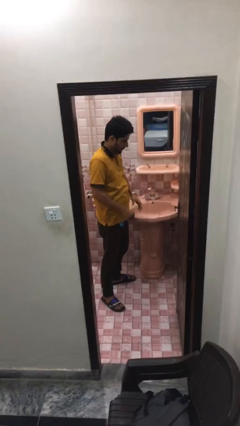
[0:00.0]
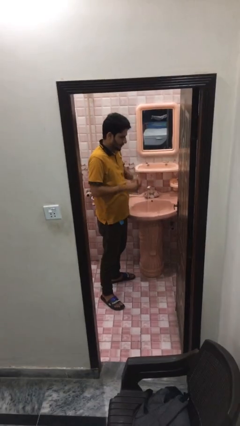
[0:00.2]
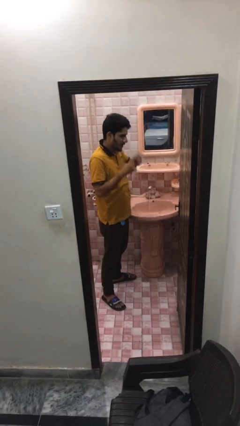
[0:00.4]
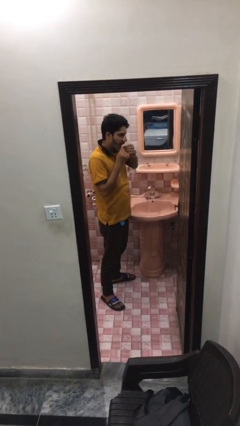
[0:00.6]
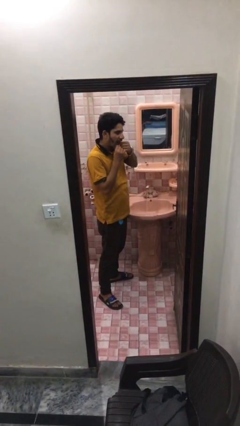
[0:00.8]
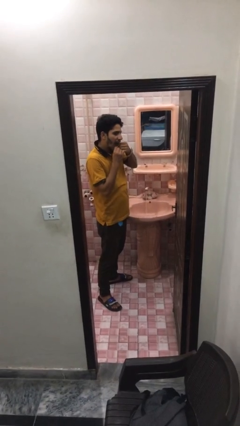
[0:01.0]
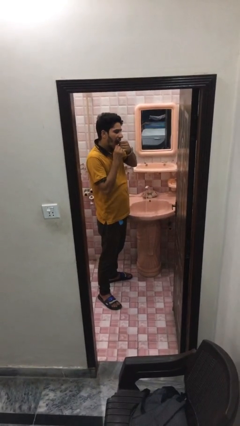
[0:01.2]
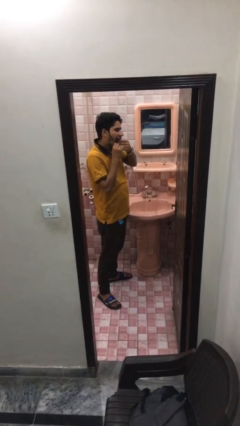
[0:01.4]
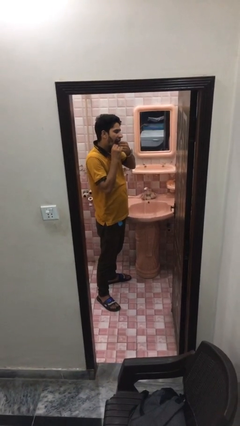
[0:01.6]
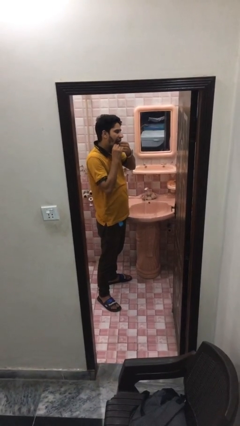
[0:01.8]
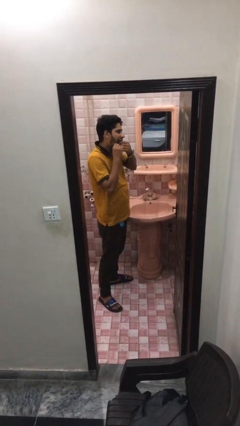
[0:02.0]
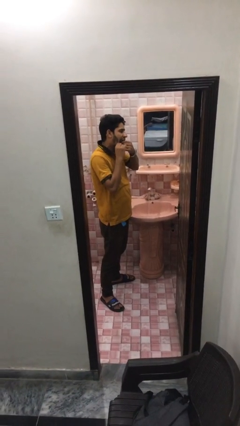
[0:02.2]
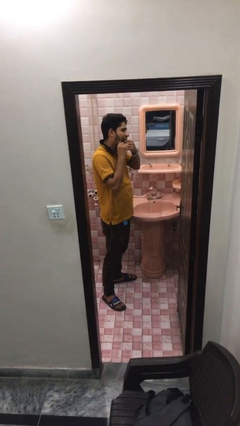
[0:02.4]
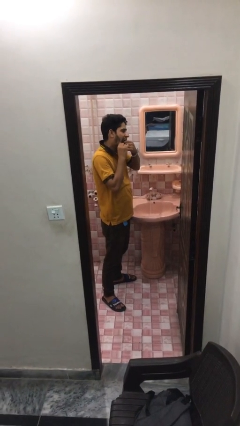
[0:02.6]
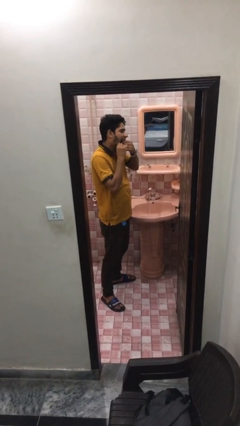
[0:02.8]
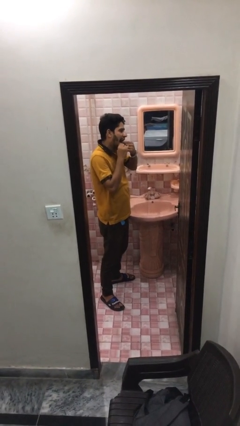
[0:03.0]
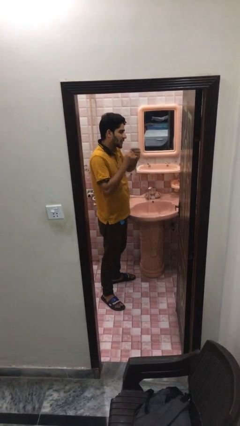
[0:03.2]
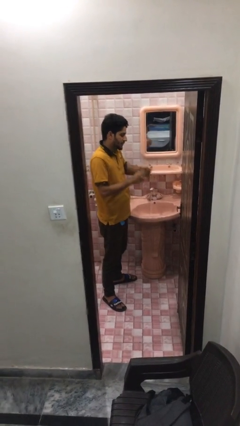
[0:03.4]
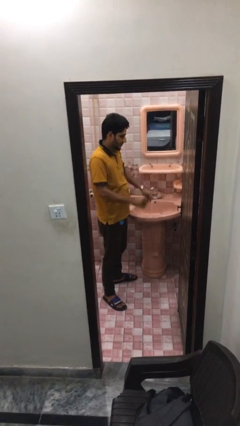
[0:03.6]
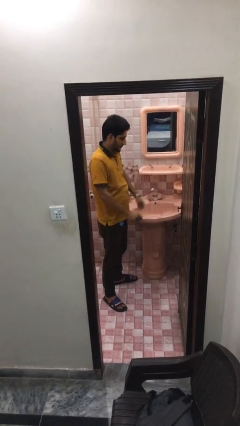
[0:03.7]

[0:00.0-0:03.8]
person flosses

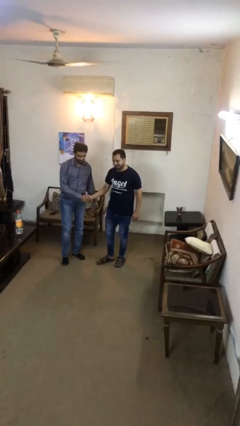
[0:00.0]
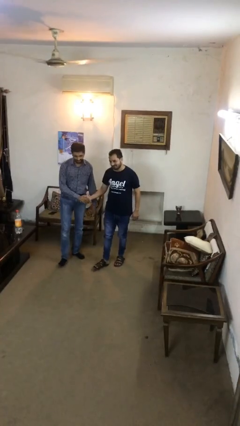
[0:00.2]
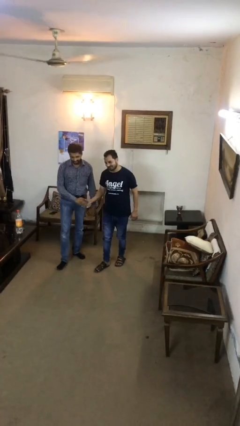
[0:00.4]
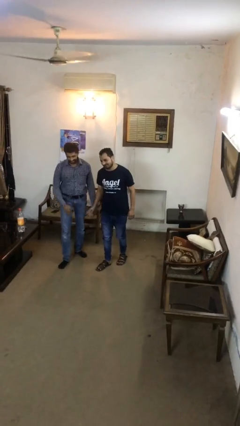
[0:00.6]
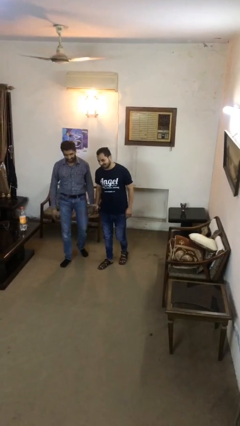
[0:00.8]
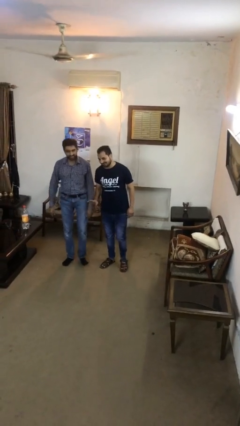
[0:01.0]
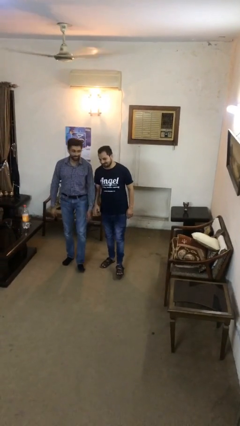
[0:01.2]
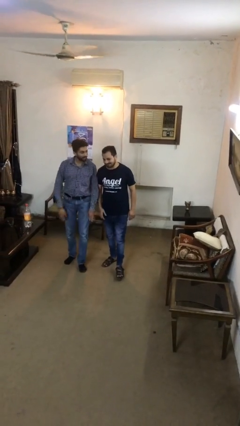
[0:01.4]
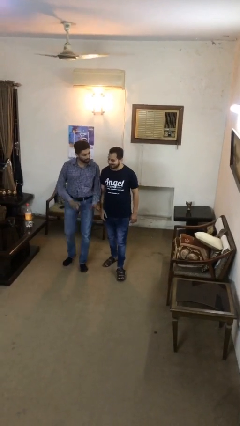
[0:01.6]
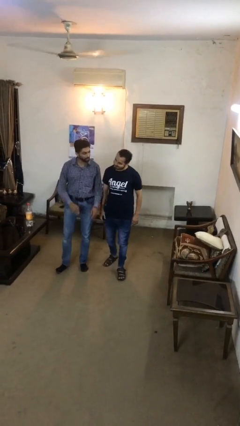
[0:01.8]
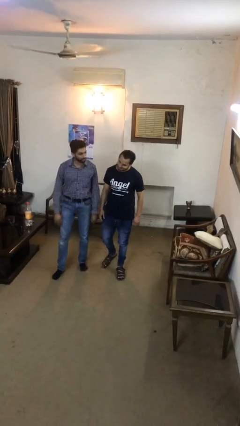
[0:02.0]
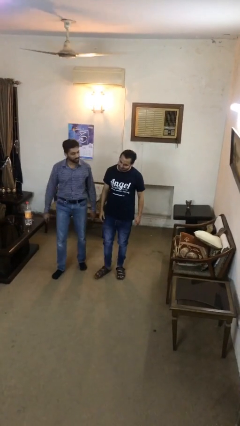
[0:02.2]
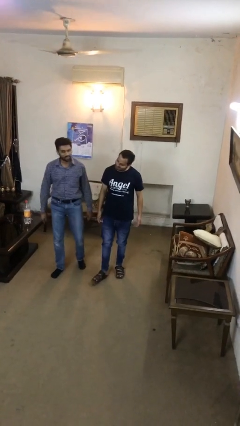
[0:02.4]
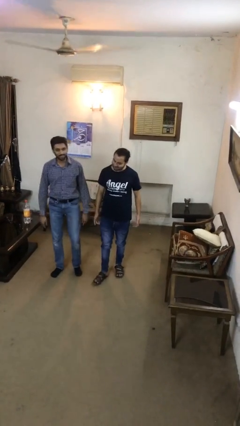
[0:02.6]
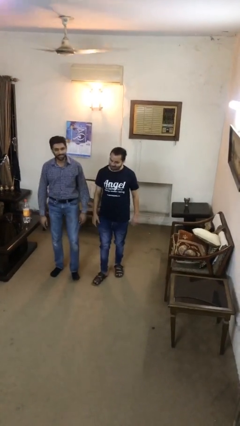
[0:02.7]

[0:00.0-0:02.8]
person talks to person

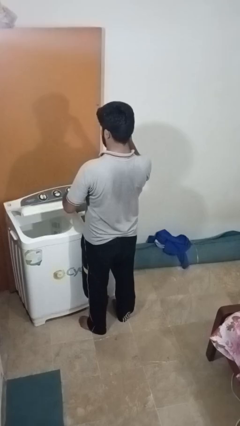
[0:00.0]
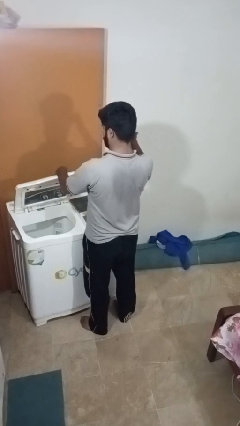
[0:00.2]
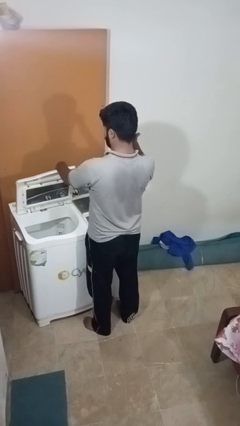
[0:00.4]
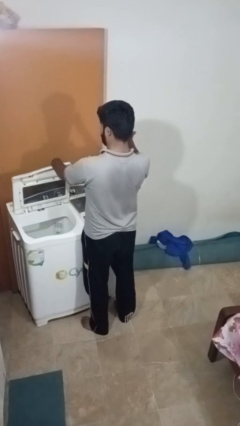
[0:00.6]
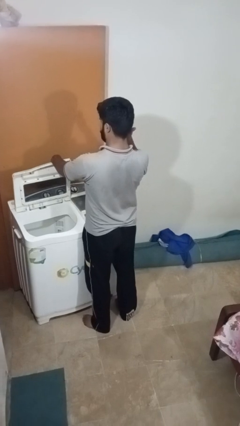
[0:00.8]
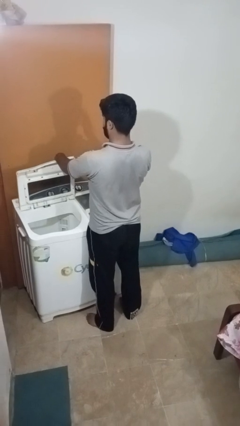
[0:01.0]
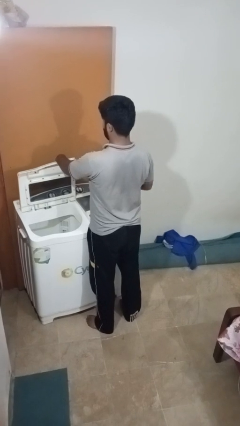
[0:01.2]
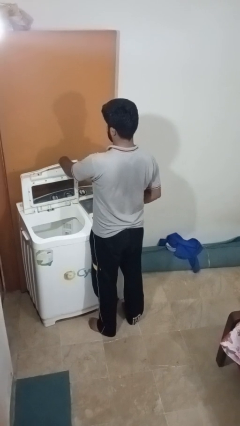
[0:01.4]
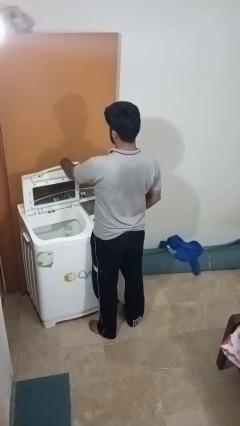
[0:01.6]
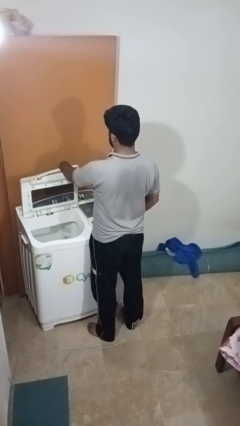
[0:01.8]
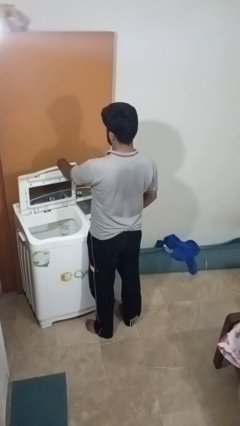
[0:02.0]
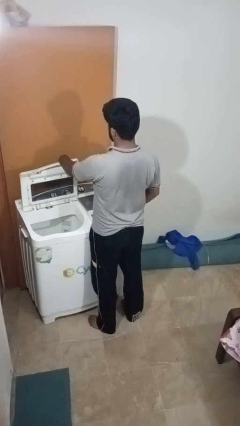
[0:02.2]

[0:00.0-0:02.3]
person opens clothes washer

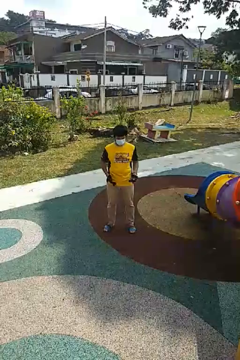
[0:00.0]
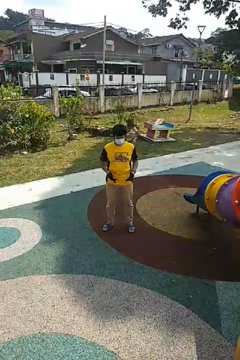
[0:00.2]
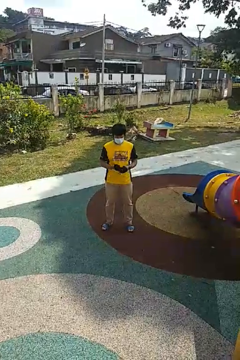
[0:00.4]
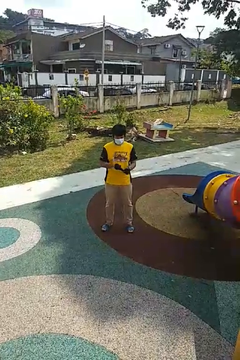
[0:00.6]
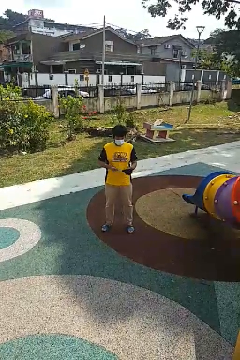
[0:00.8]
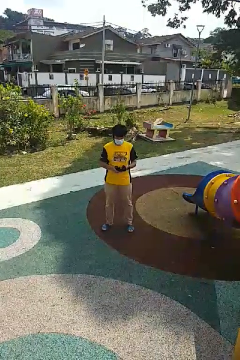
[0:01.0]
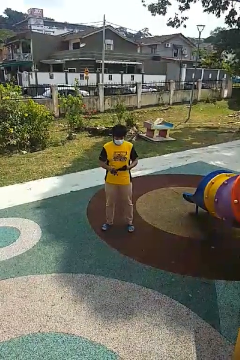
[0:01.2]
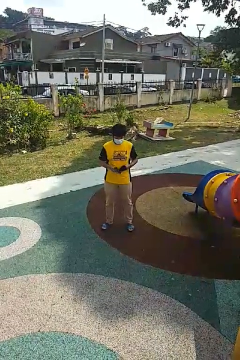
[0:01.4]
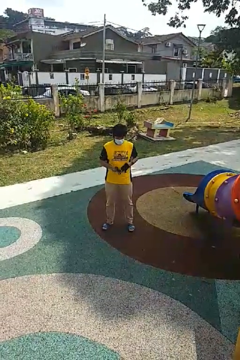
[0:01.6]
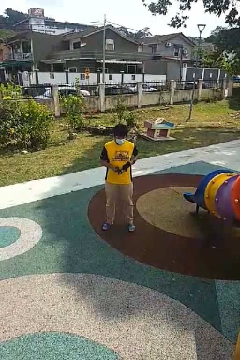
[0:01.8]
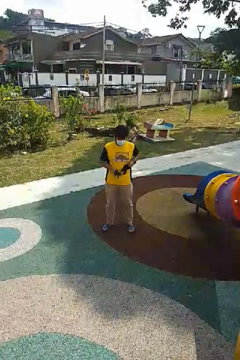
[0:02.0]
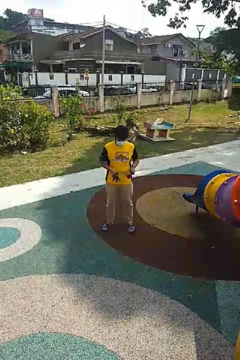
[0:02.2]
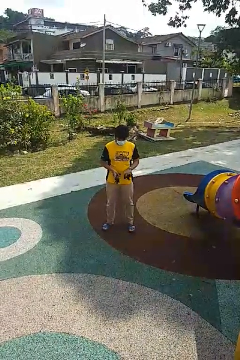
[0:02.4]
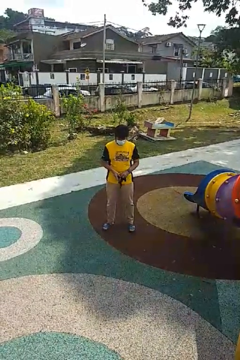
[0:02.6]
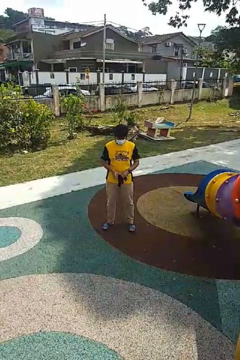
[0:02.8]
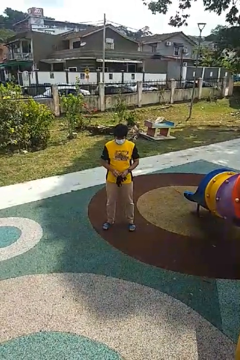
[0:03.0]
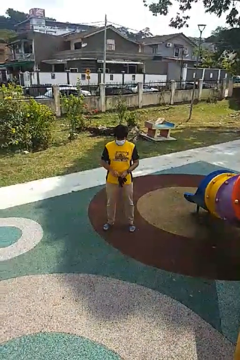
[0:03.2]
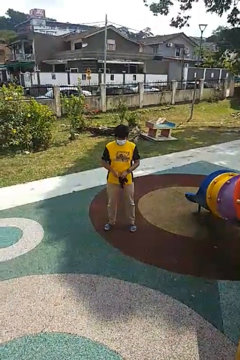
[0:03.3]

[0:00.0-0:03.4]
person takes off gloves

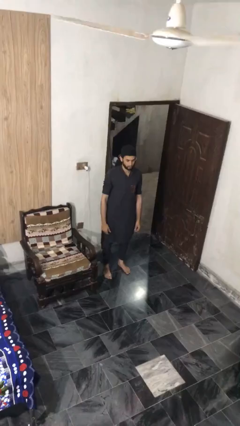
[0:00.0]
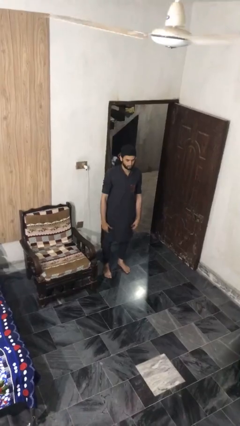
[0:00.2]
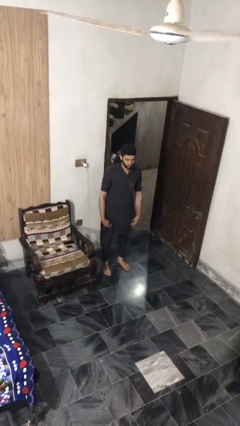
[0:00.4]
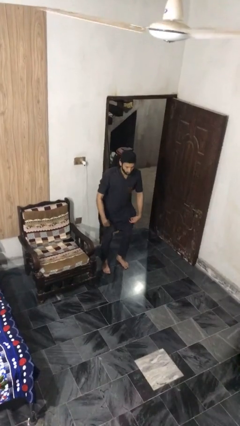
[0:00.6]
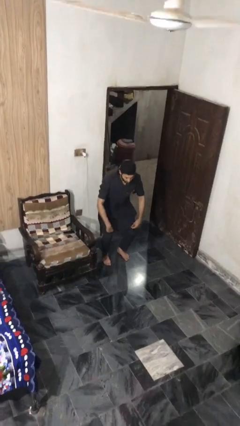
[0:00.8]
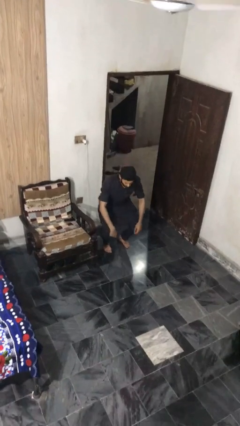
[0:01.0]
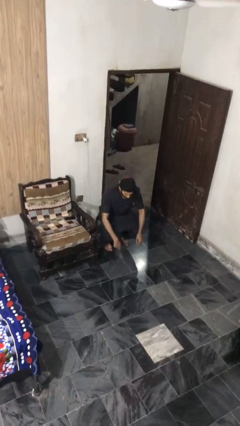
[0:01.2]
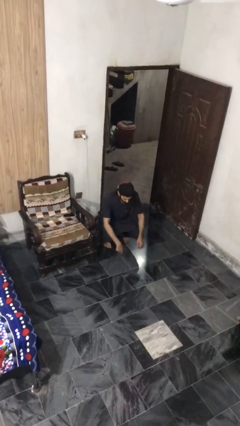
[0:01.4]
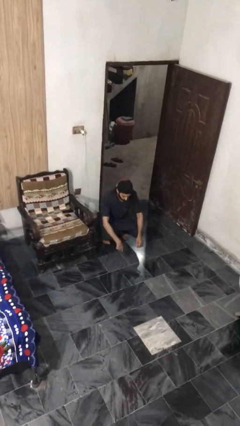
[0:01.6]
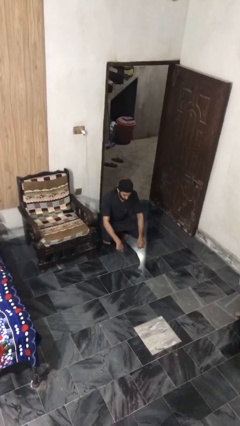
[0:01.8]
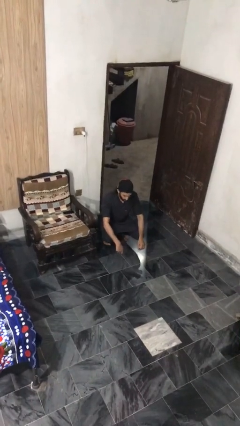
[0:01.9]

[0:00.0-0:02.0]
person squats

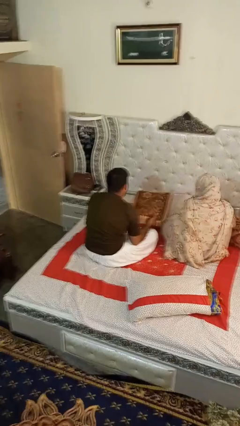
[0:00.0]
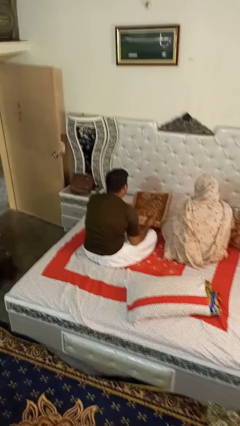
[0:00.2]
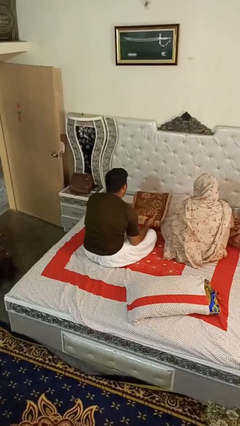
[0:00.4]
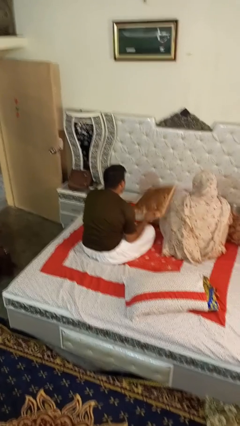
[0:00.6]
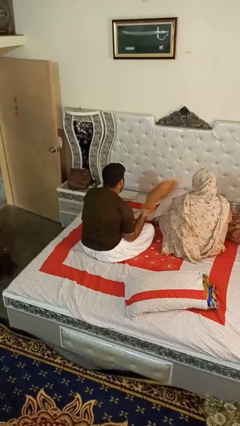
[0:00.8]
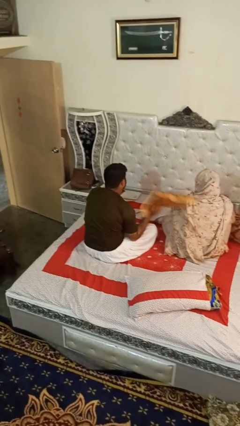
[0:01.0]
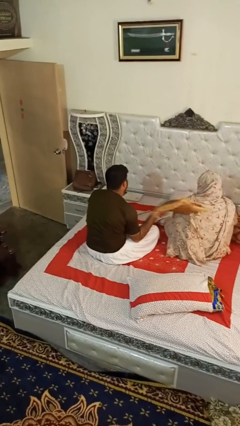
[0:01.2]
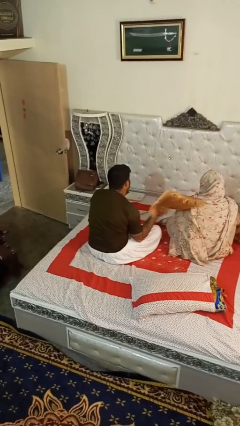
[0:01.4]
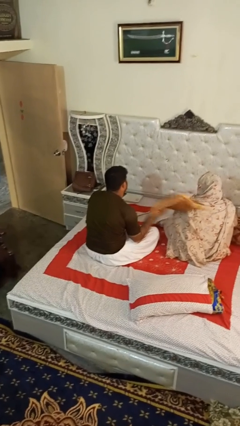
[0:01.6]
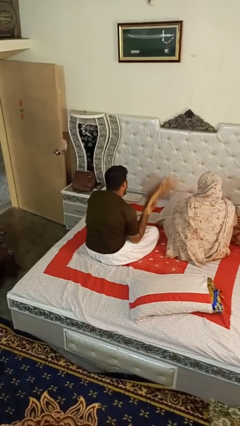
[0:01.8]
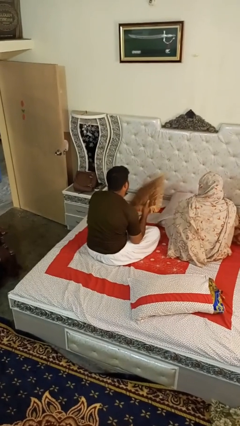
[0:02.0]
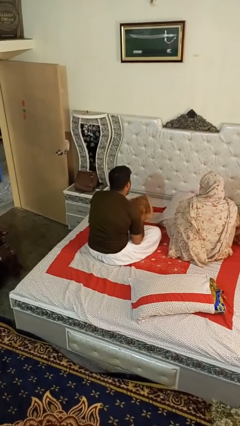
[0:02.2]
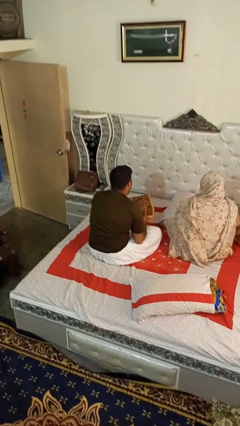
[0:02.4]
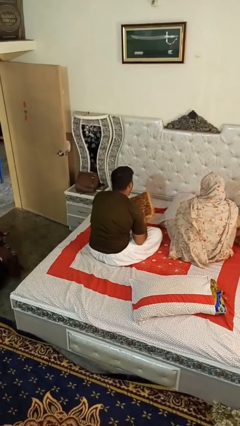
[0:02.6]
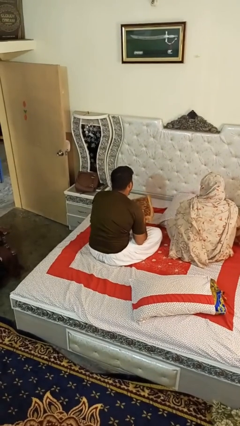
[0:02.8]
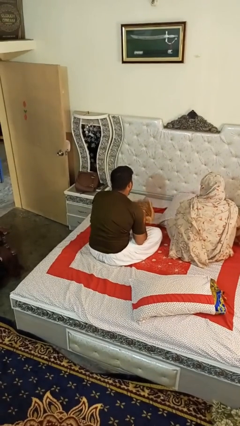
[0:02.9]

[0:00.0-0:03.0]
person hits person with pillow

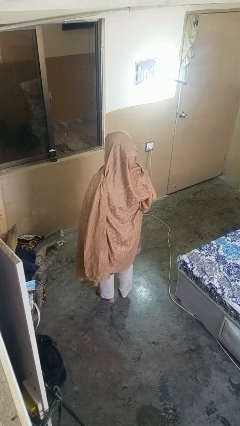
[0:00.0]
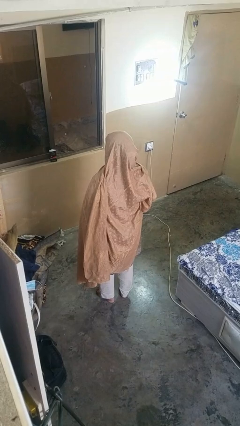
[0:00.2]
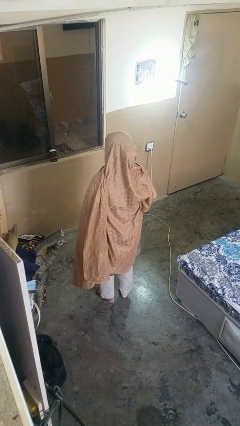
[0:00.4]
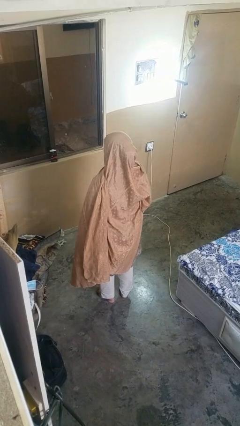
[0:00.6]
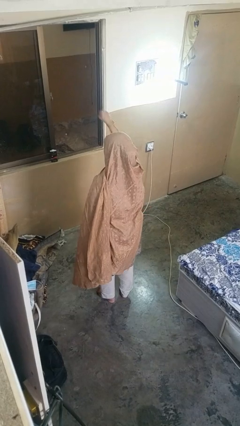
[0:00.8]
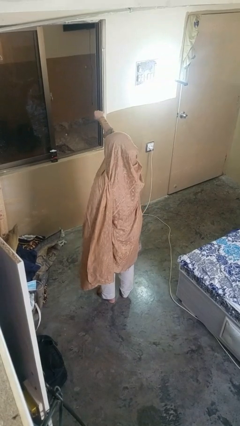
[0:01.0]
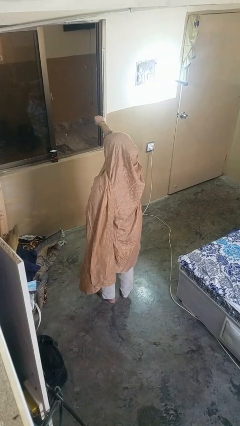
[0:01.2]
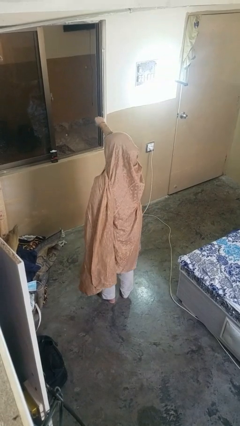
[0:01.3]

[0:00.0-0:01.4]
person punches
